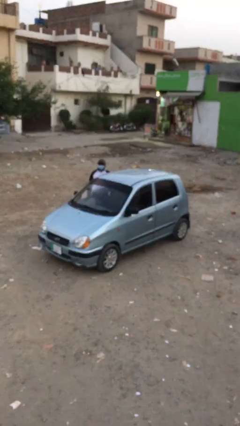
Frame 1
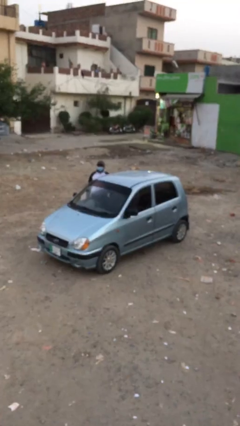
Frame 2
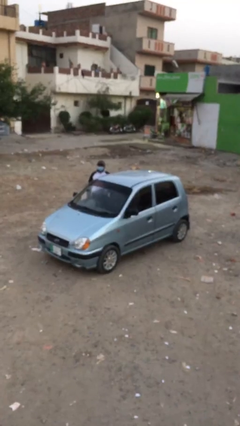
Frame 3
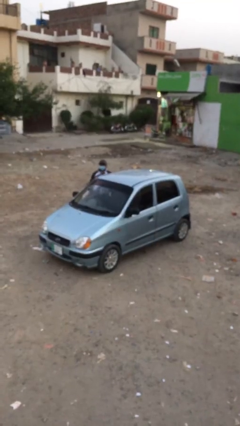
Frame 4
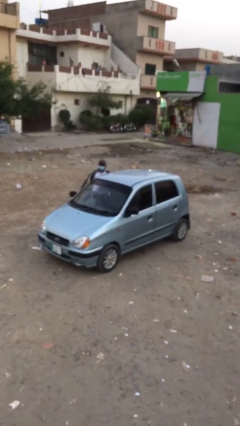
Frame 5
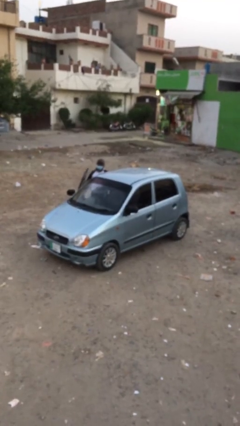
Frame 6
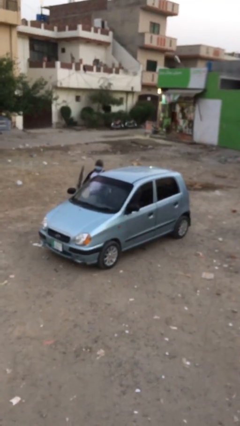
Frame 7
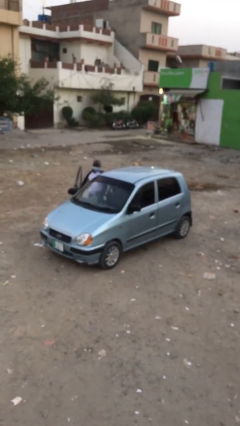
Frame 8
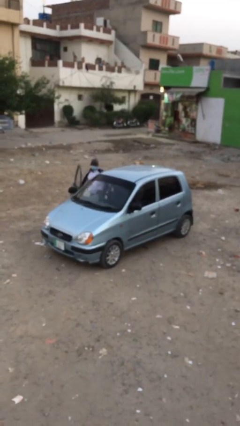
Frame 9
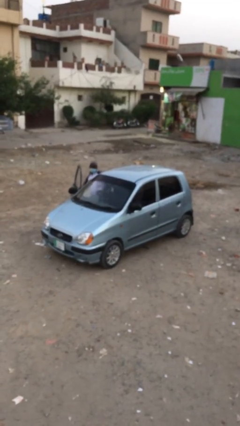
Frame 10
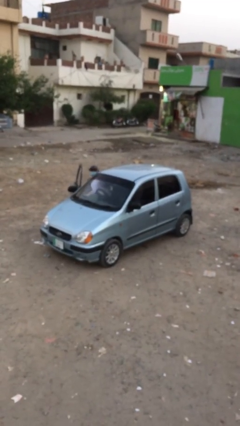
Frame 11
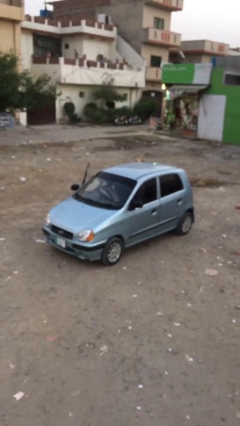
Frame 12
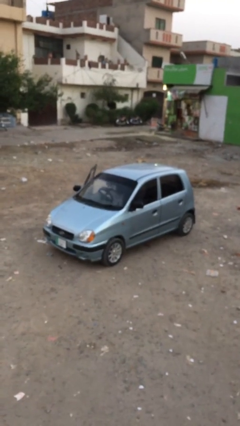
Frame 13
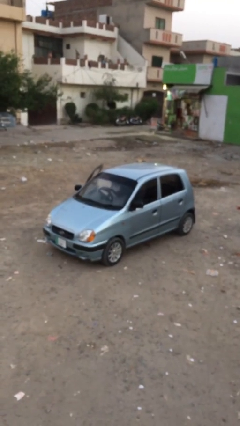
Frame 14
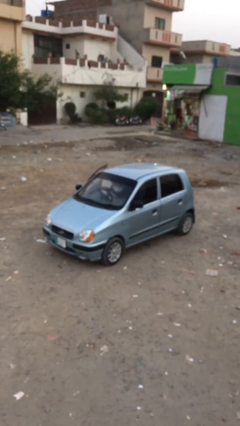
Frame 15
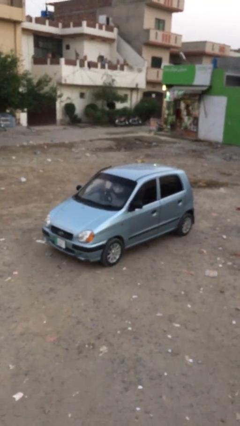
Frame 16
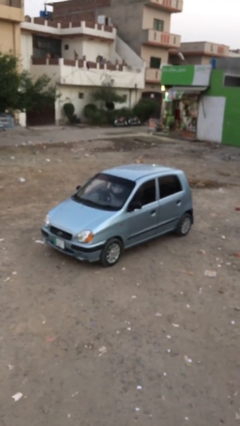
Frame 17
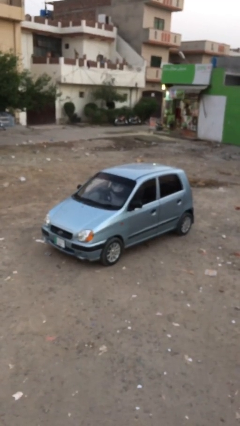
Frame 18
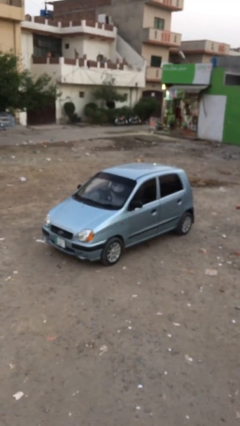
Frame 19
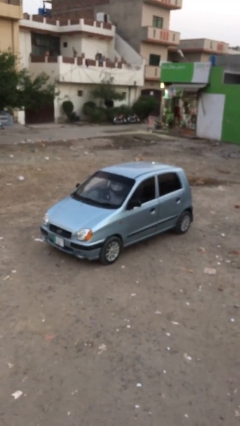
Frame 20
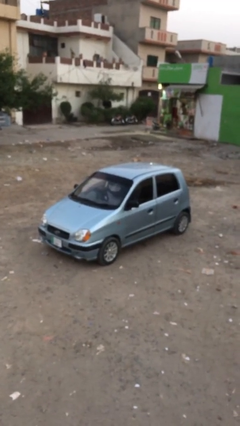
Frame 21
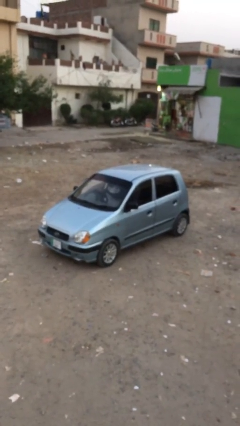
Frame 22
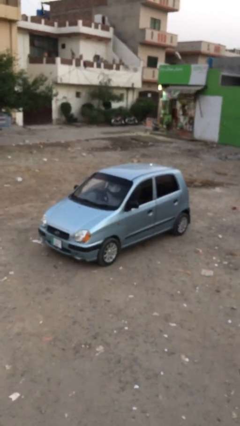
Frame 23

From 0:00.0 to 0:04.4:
car picks up person

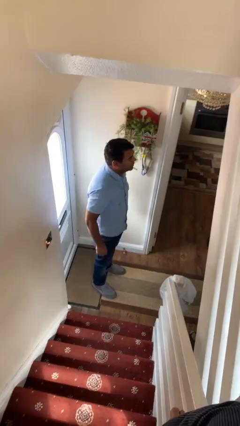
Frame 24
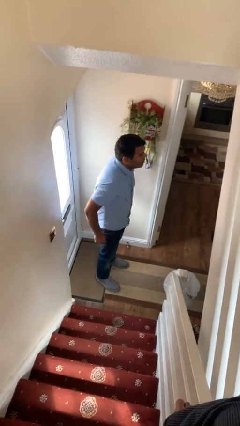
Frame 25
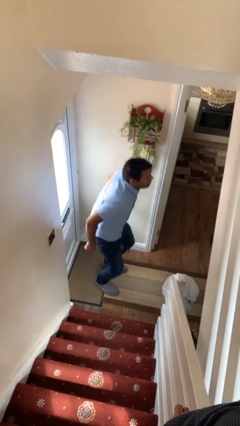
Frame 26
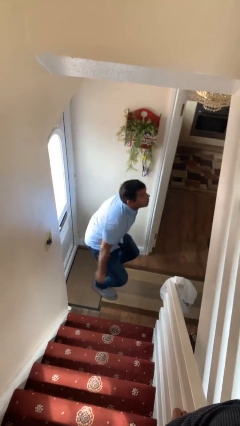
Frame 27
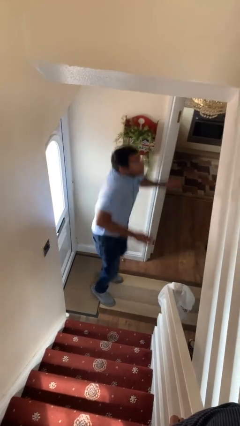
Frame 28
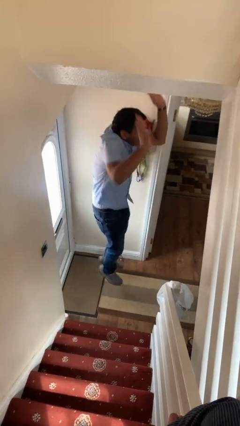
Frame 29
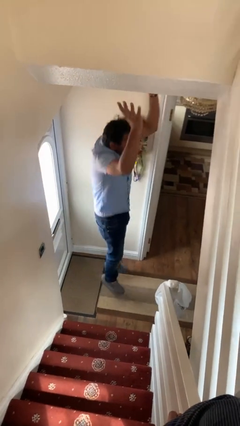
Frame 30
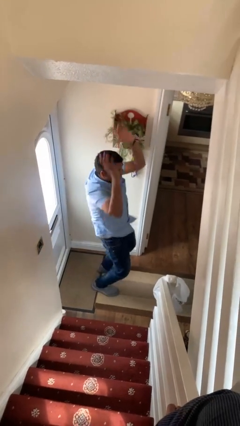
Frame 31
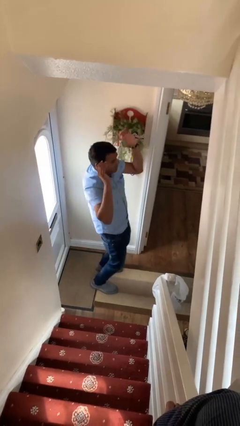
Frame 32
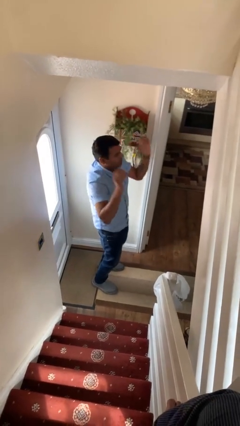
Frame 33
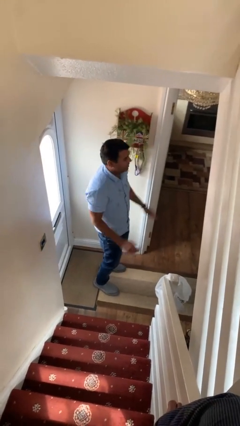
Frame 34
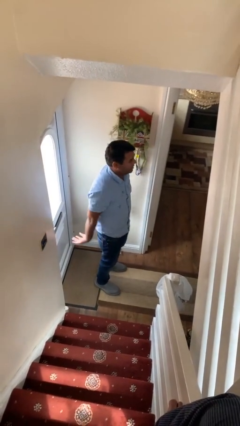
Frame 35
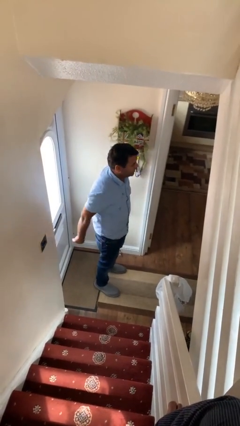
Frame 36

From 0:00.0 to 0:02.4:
person jumps

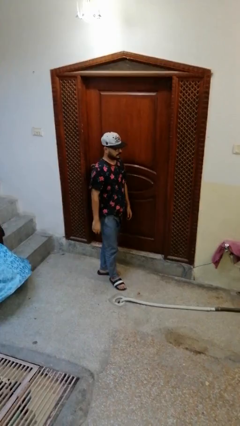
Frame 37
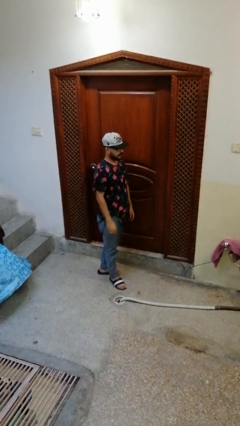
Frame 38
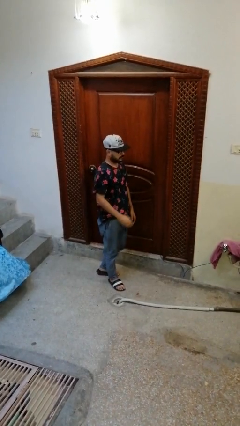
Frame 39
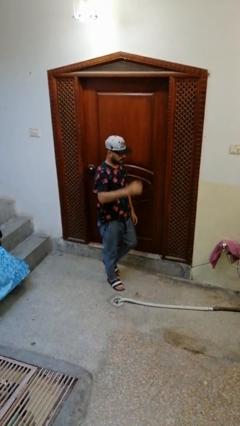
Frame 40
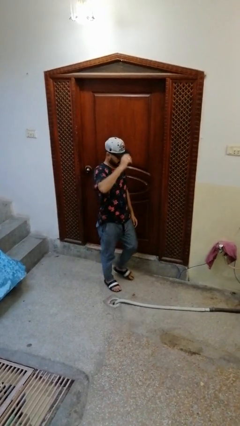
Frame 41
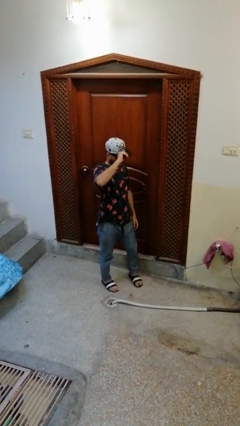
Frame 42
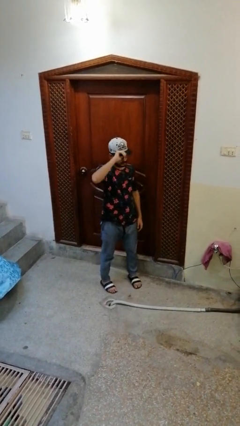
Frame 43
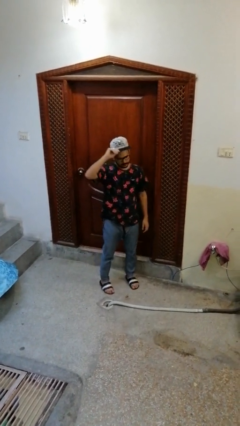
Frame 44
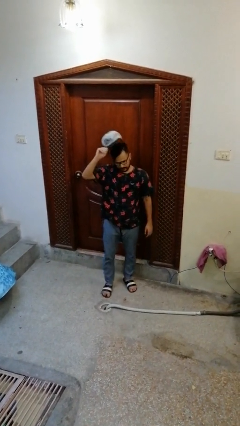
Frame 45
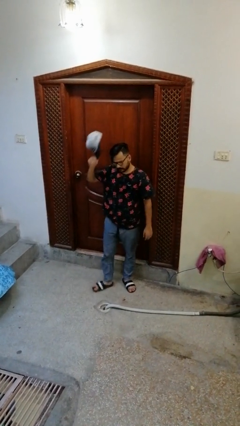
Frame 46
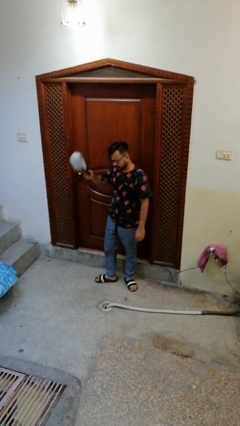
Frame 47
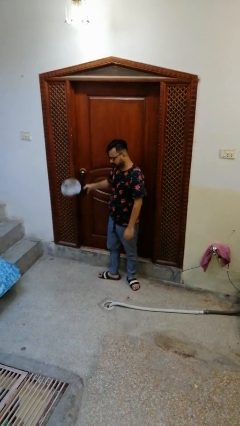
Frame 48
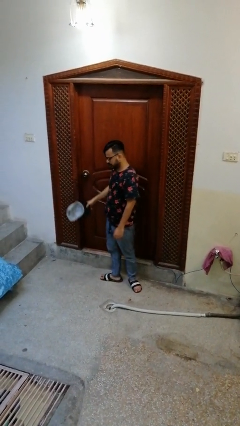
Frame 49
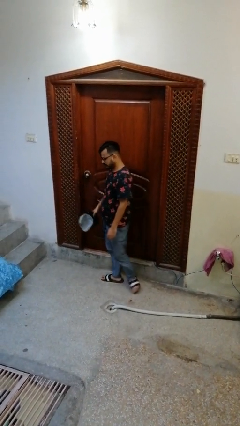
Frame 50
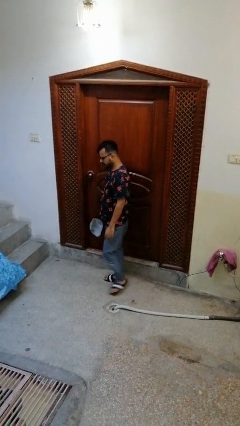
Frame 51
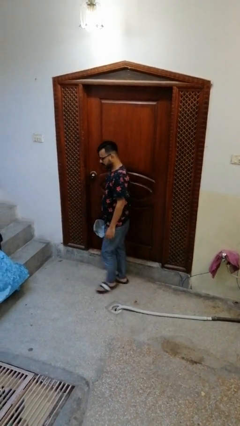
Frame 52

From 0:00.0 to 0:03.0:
person takes off hat

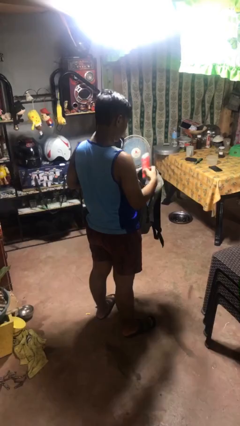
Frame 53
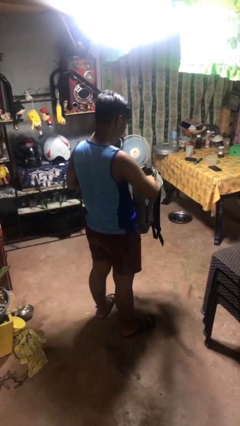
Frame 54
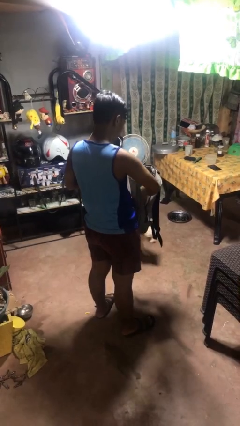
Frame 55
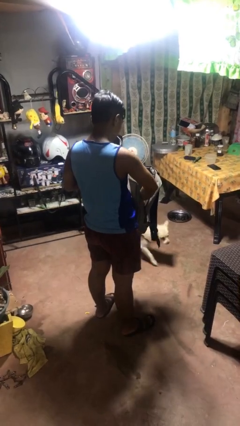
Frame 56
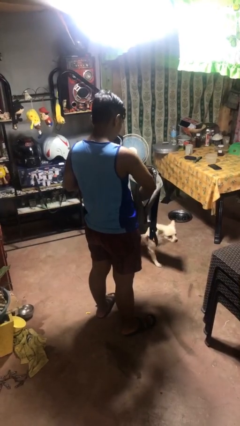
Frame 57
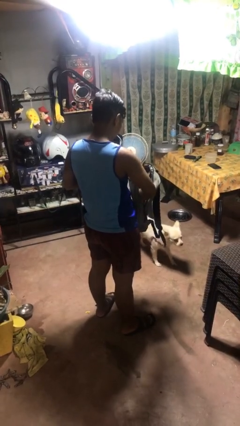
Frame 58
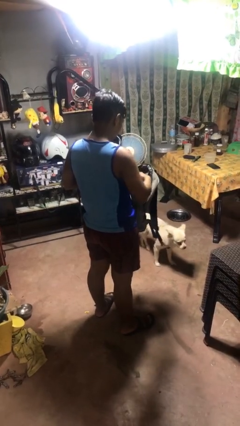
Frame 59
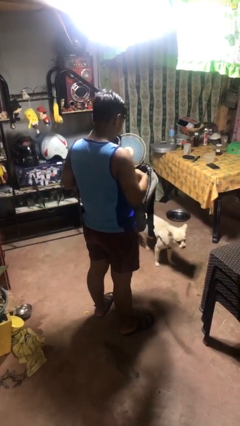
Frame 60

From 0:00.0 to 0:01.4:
person puts object into bag

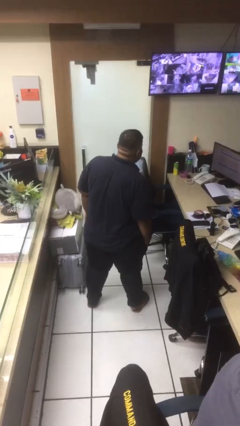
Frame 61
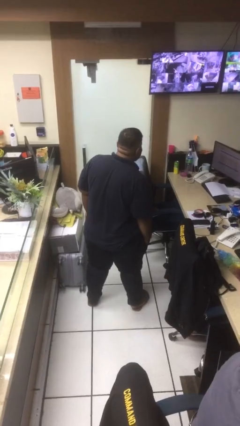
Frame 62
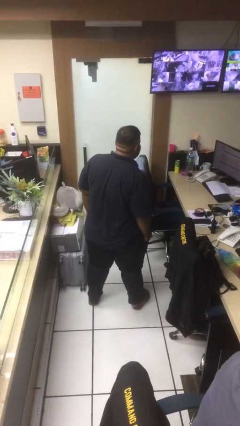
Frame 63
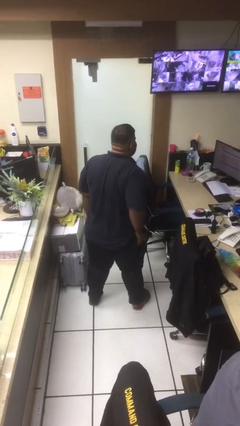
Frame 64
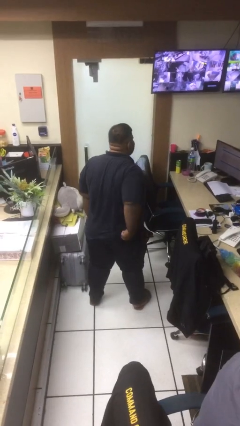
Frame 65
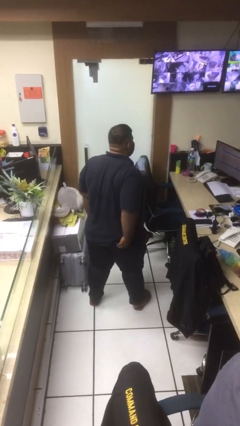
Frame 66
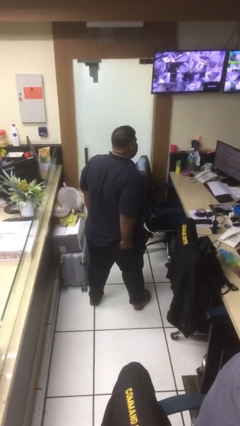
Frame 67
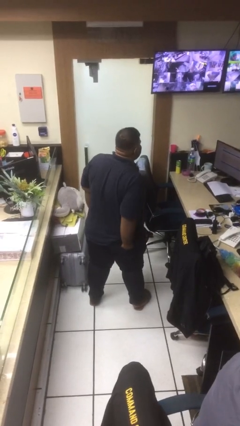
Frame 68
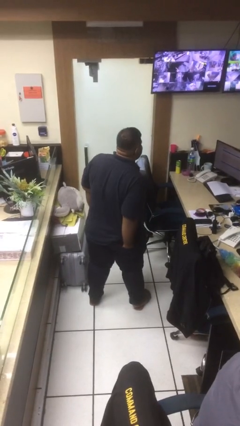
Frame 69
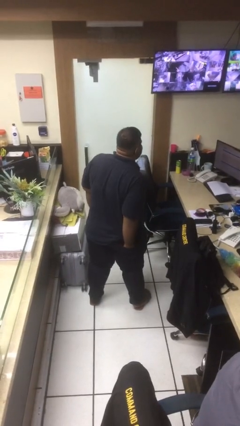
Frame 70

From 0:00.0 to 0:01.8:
person puts hands in back pockets

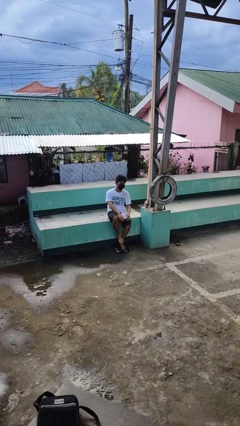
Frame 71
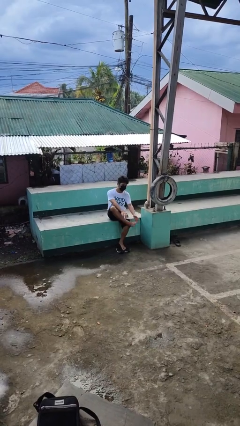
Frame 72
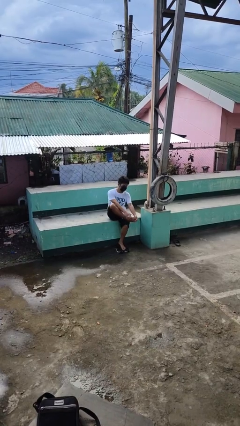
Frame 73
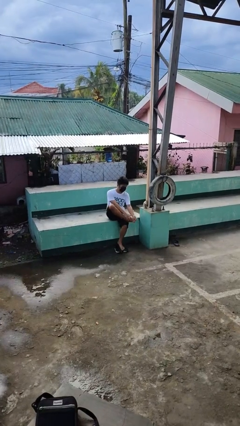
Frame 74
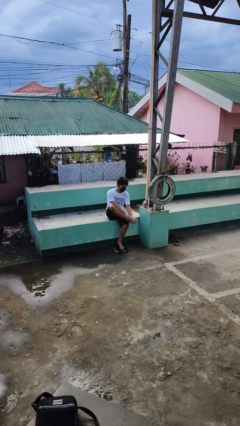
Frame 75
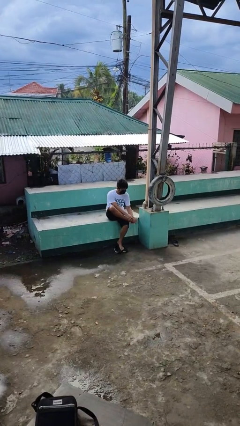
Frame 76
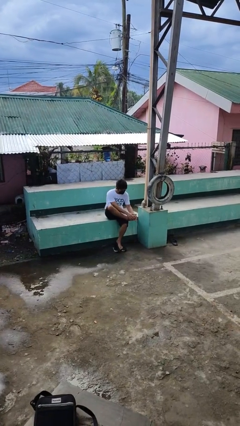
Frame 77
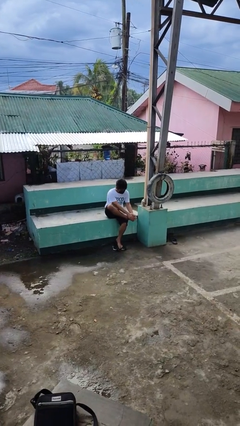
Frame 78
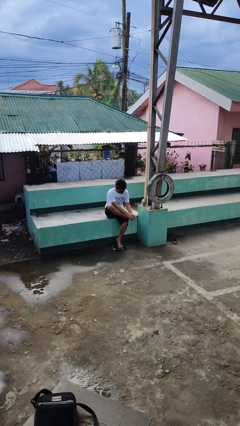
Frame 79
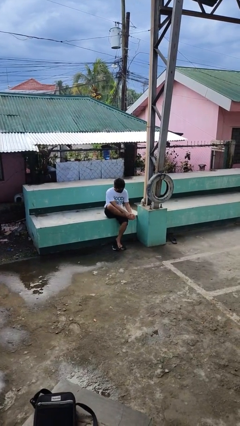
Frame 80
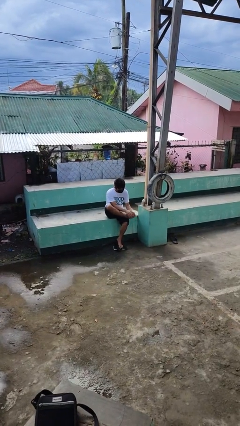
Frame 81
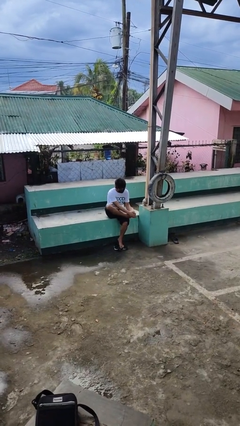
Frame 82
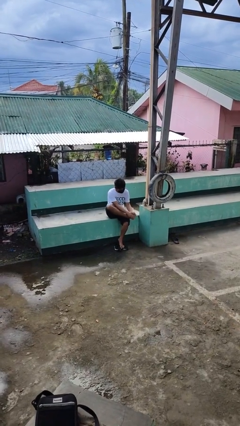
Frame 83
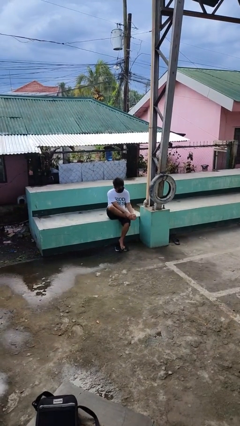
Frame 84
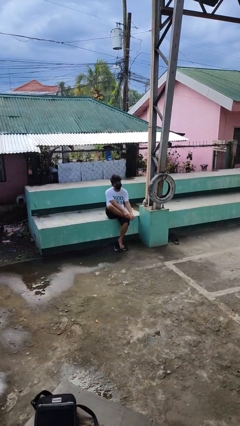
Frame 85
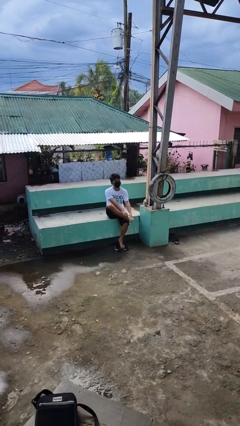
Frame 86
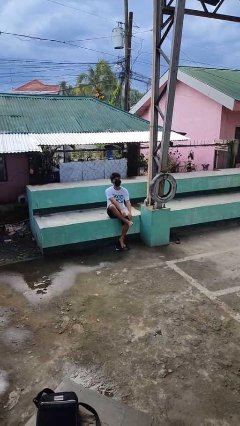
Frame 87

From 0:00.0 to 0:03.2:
person rubs foot

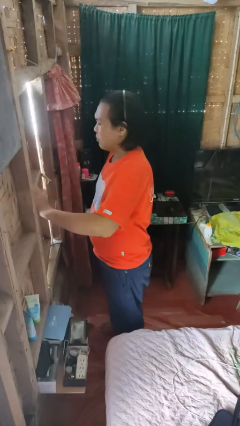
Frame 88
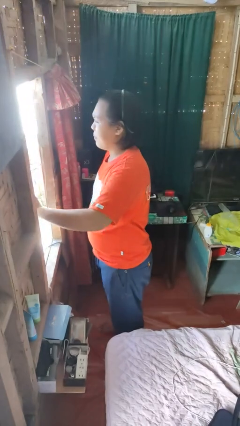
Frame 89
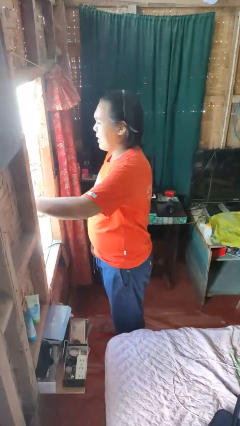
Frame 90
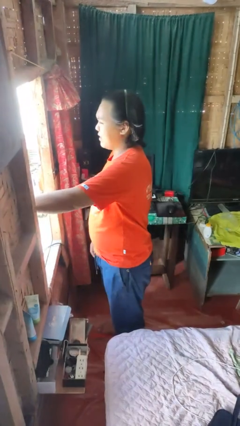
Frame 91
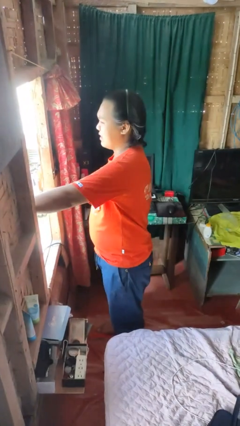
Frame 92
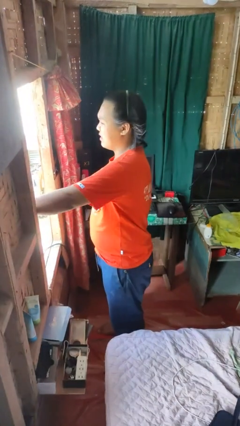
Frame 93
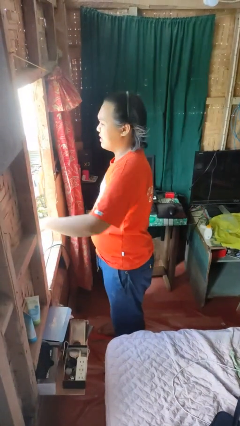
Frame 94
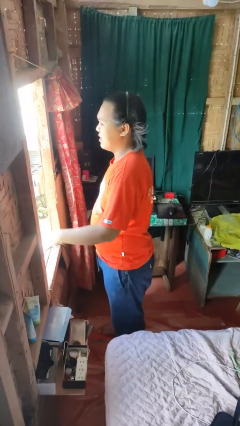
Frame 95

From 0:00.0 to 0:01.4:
person opens home window
